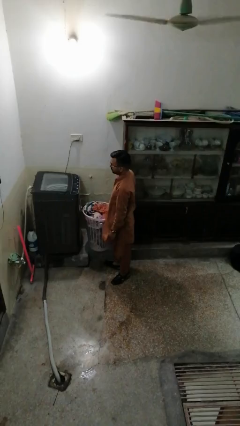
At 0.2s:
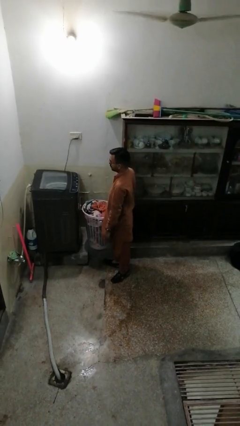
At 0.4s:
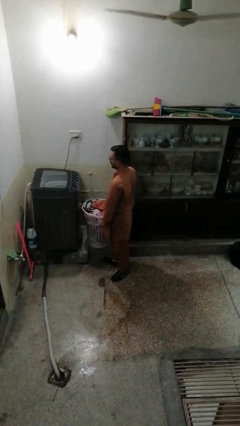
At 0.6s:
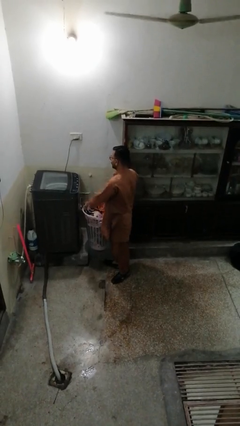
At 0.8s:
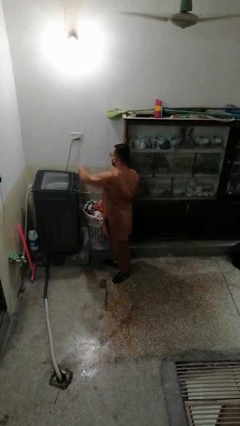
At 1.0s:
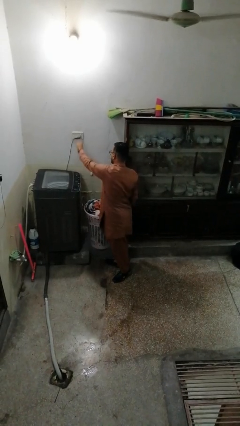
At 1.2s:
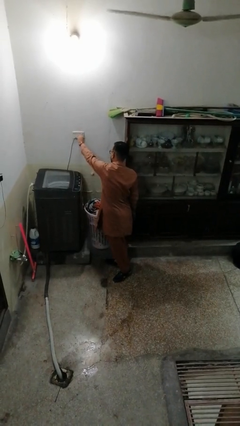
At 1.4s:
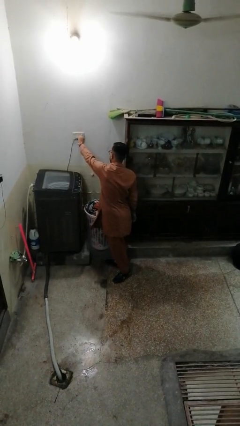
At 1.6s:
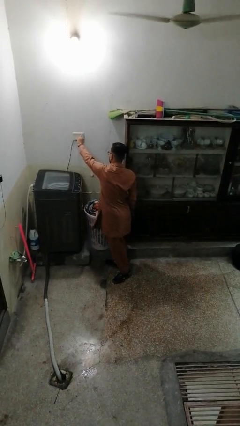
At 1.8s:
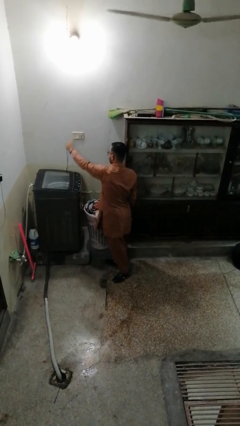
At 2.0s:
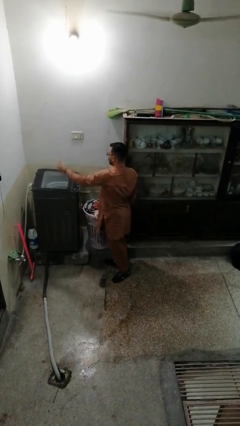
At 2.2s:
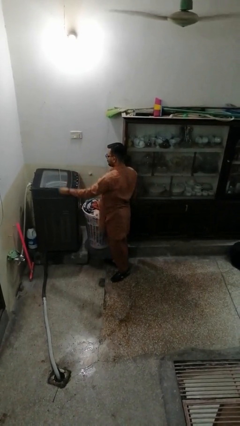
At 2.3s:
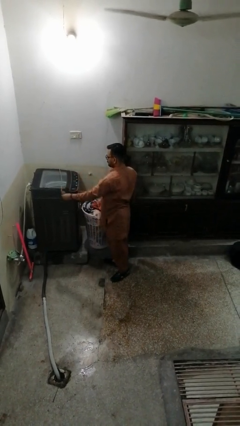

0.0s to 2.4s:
person unplugs from electrical socket

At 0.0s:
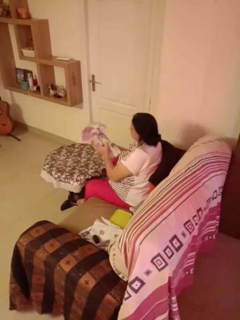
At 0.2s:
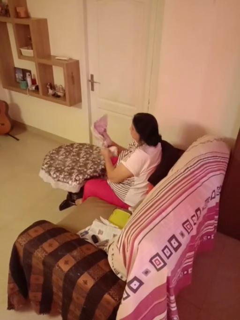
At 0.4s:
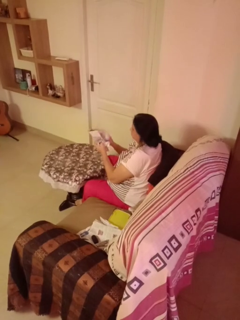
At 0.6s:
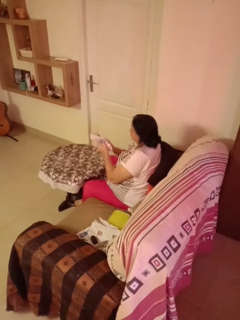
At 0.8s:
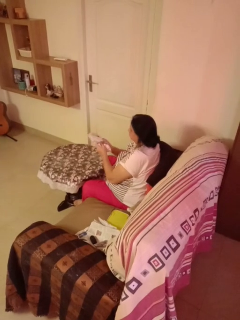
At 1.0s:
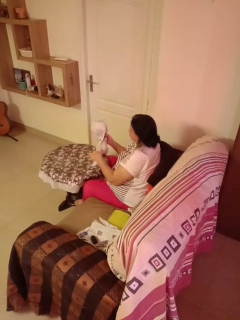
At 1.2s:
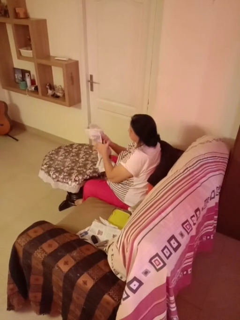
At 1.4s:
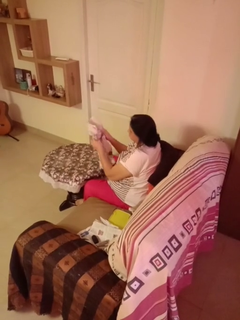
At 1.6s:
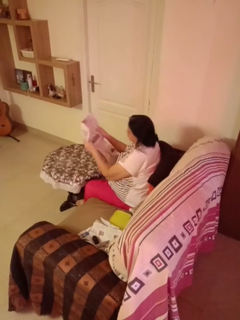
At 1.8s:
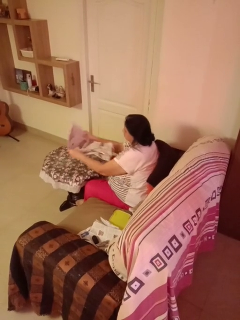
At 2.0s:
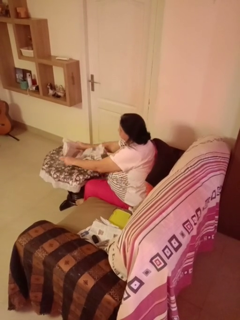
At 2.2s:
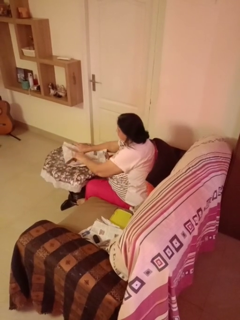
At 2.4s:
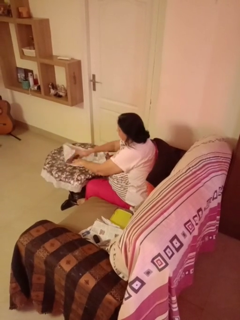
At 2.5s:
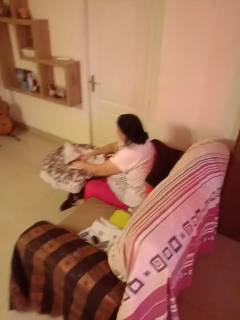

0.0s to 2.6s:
person crumples paper

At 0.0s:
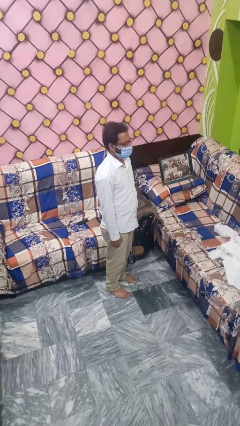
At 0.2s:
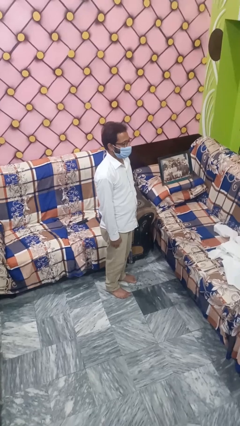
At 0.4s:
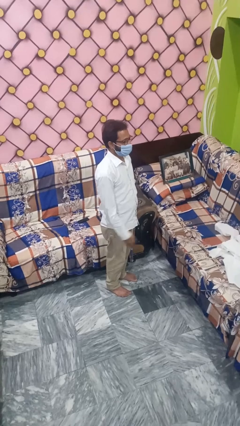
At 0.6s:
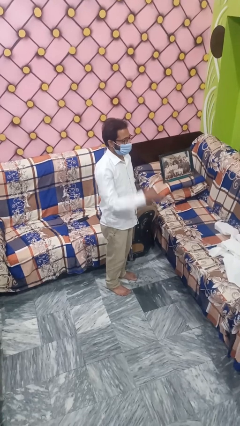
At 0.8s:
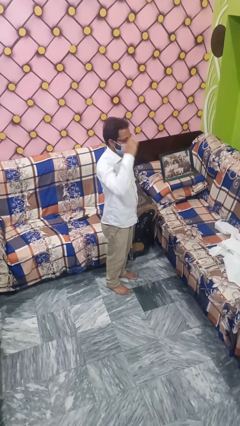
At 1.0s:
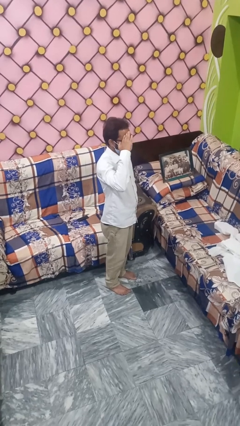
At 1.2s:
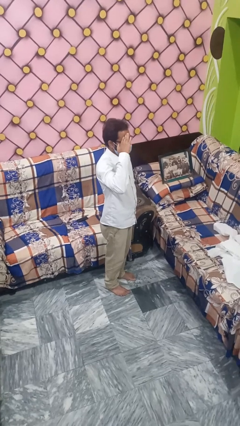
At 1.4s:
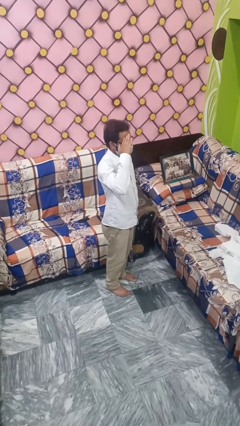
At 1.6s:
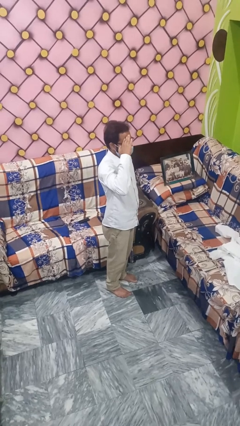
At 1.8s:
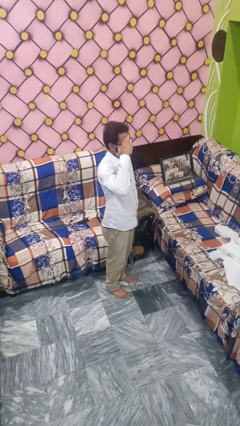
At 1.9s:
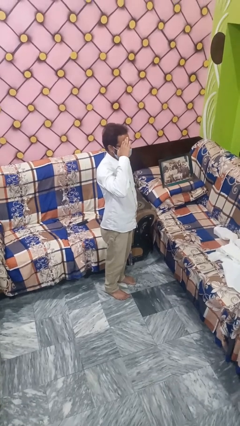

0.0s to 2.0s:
person salutes

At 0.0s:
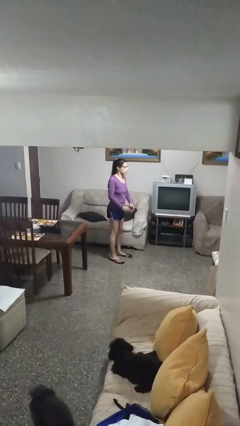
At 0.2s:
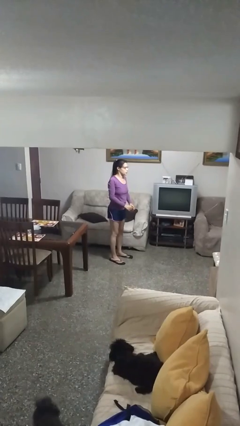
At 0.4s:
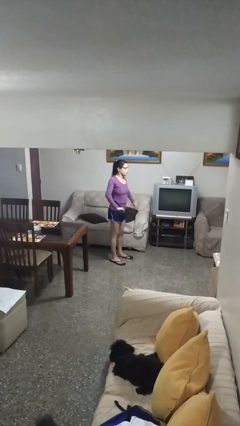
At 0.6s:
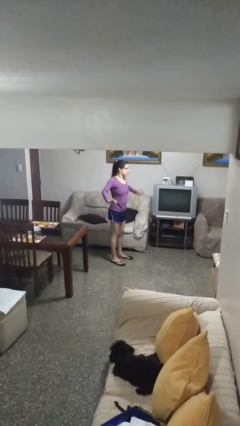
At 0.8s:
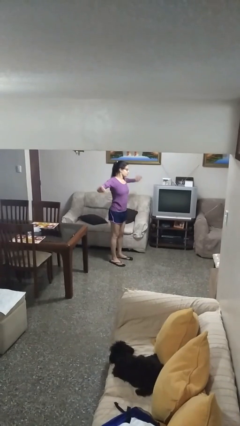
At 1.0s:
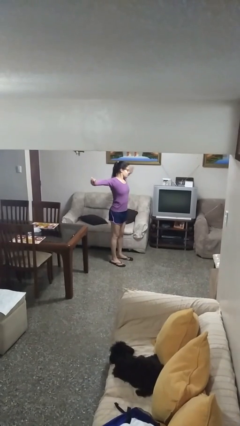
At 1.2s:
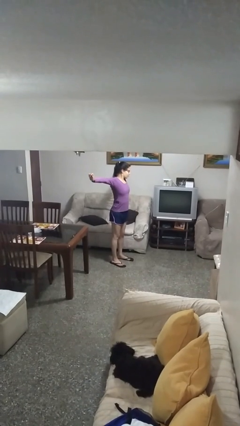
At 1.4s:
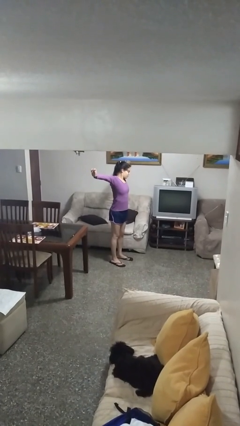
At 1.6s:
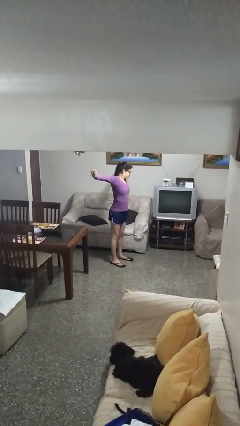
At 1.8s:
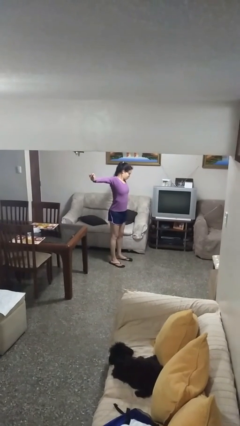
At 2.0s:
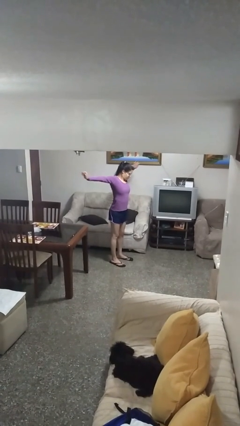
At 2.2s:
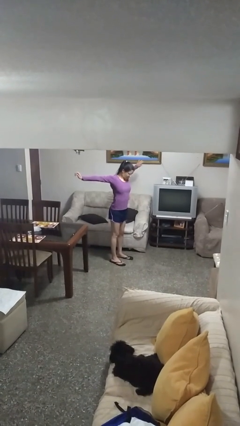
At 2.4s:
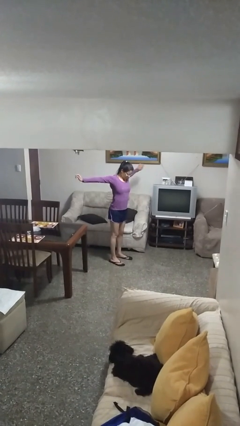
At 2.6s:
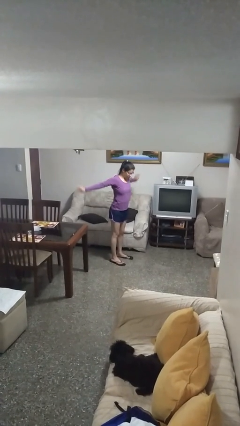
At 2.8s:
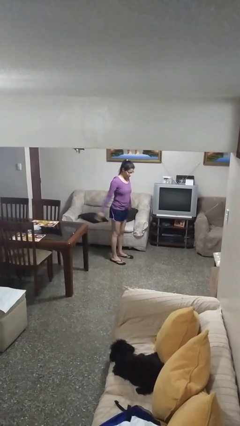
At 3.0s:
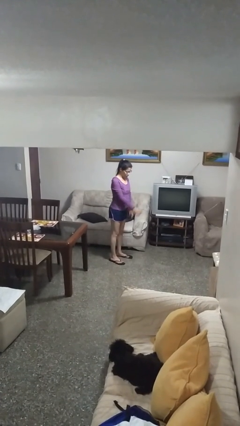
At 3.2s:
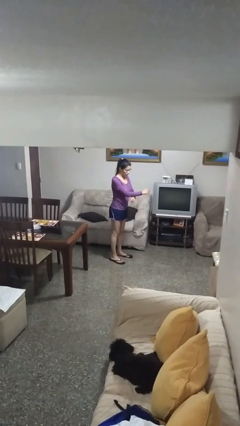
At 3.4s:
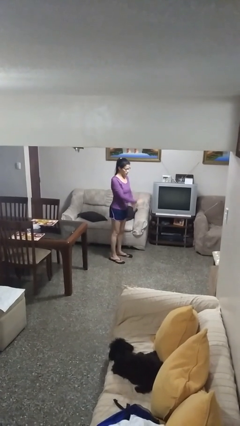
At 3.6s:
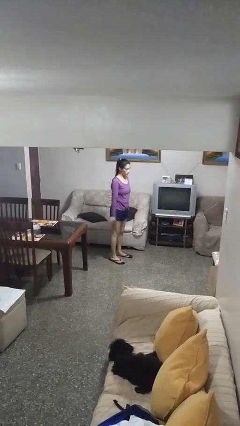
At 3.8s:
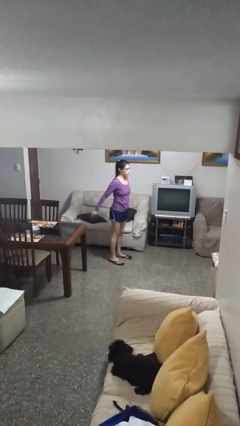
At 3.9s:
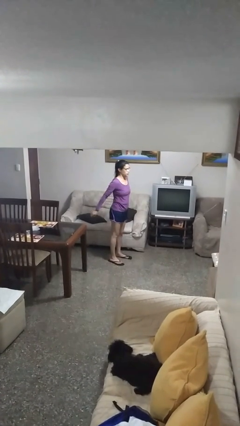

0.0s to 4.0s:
person stretches arms to side

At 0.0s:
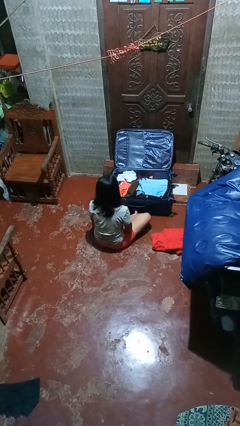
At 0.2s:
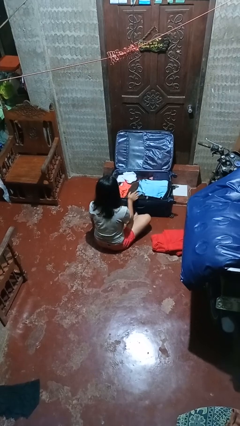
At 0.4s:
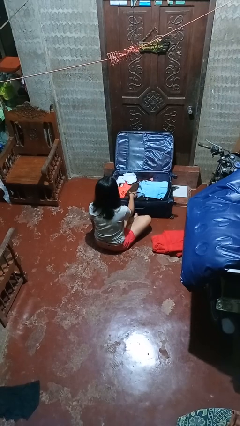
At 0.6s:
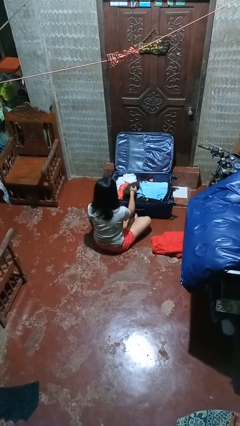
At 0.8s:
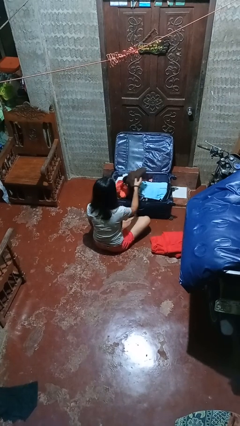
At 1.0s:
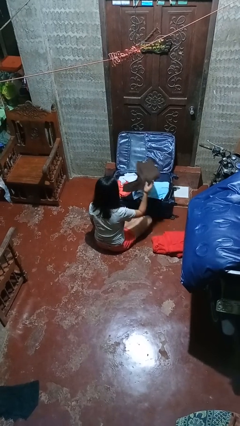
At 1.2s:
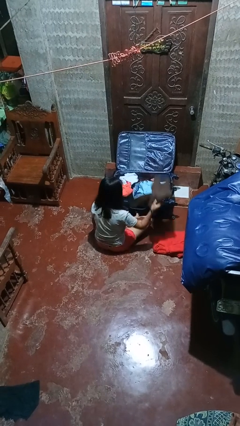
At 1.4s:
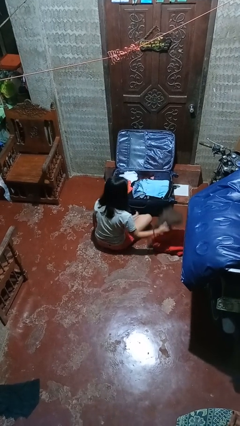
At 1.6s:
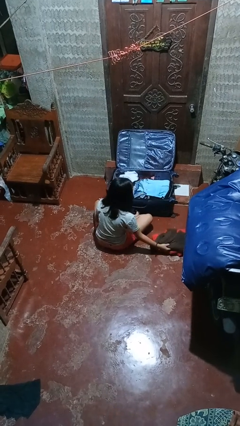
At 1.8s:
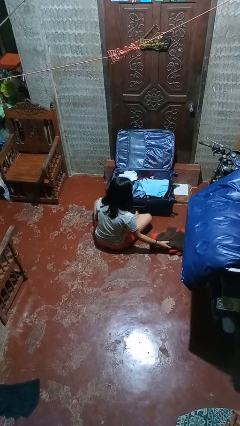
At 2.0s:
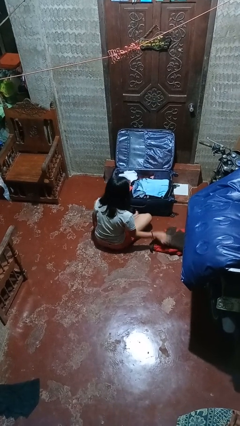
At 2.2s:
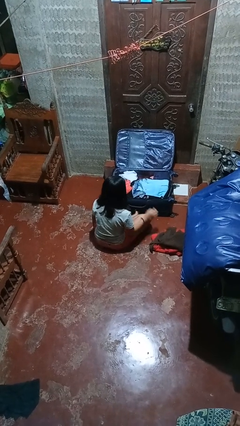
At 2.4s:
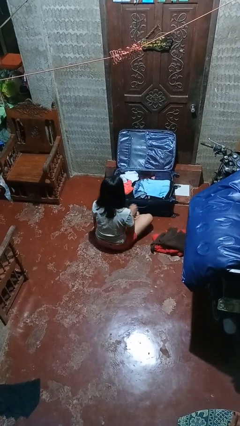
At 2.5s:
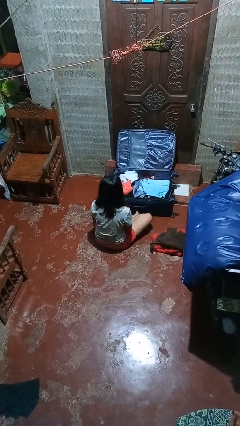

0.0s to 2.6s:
person unloads clothes from suitcase

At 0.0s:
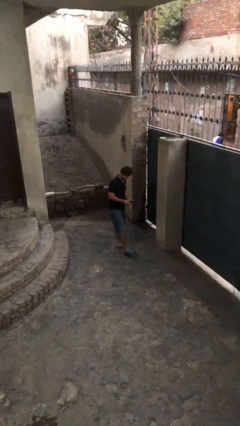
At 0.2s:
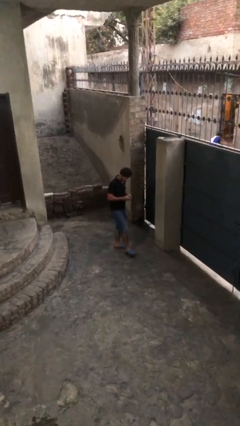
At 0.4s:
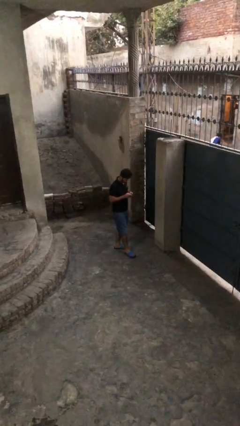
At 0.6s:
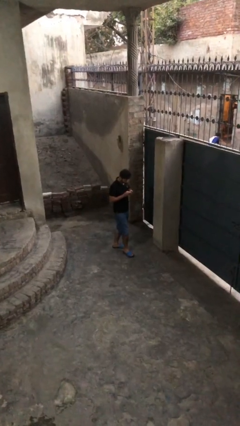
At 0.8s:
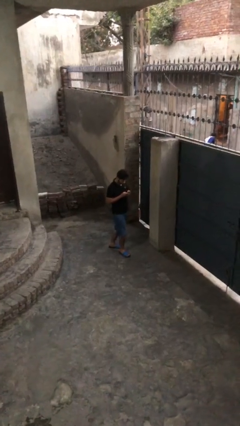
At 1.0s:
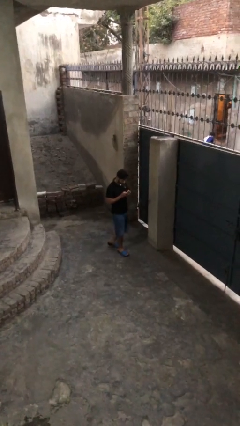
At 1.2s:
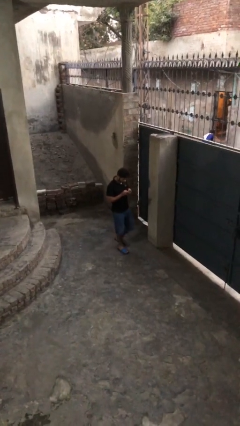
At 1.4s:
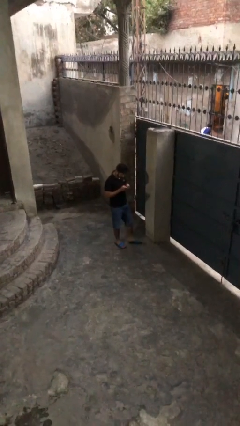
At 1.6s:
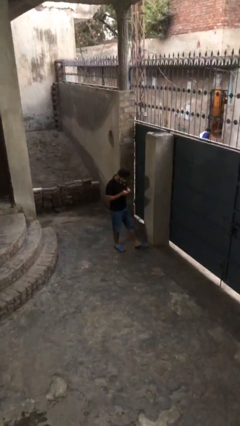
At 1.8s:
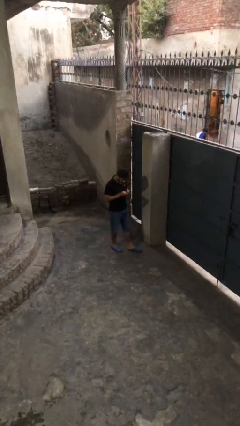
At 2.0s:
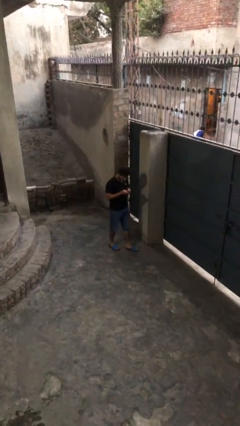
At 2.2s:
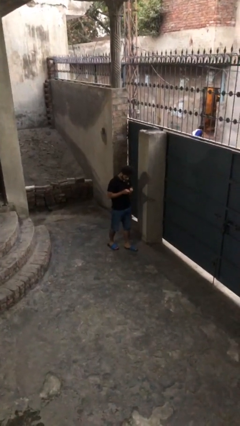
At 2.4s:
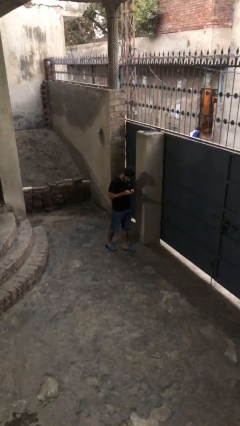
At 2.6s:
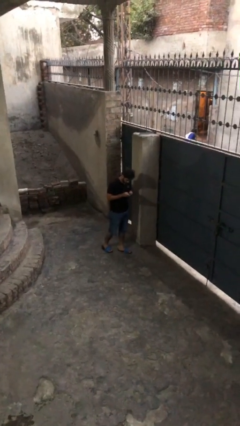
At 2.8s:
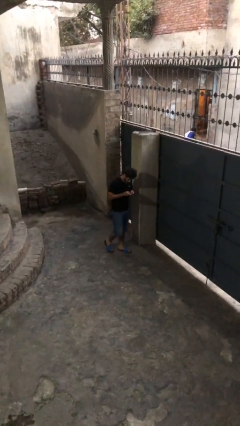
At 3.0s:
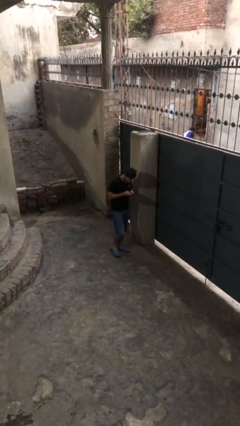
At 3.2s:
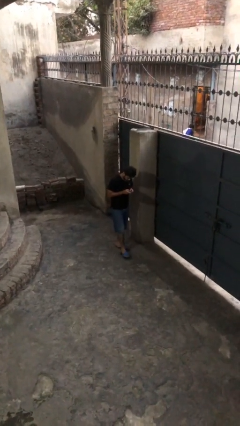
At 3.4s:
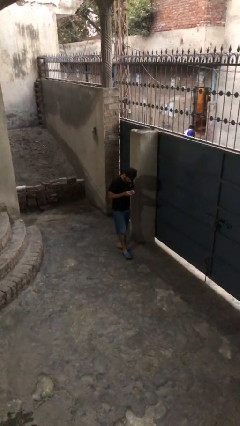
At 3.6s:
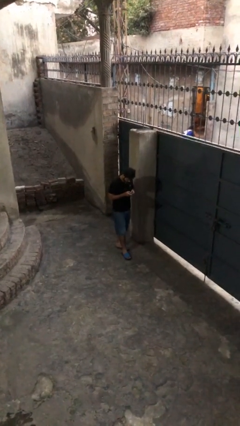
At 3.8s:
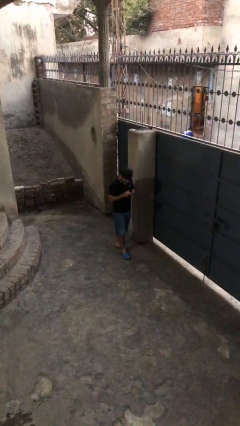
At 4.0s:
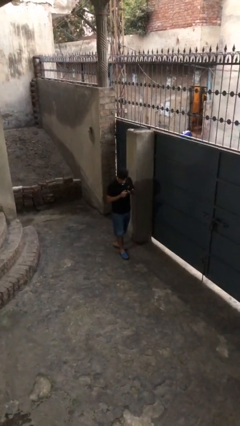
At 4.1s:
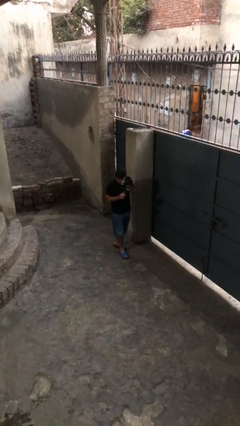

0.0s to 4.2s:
person texts on phone

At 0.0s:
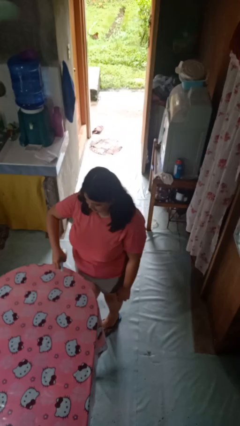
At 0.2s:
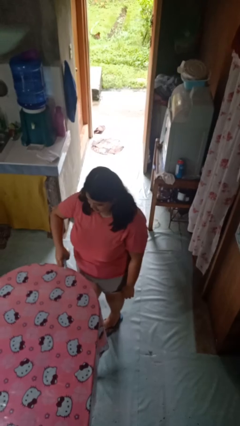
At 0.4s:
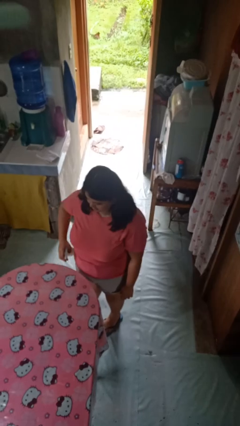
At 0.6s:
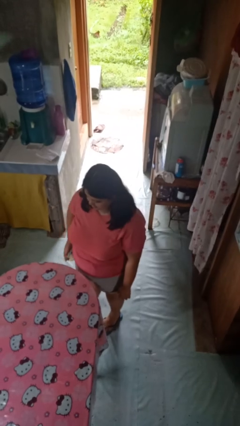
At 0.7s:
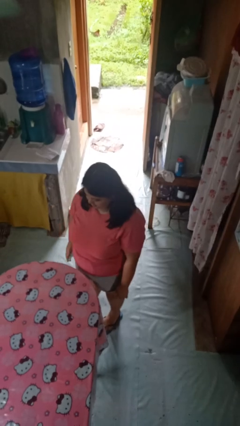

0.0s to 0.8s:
person sprays from bottle
